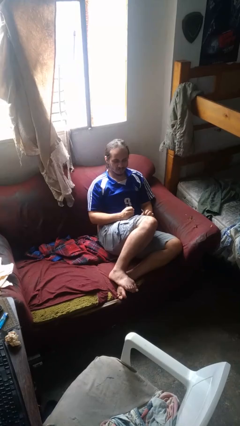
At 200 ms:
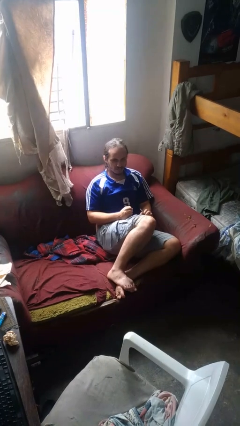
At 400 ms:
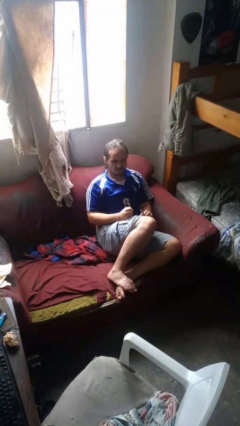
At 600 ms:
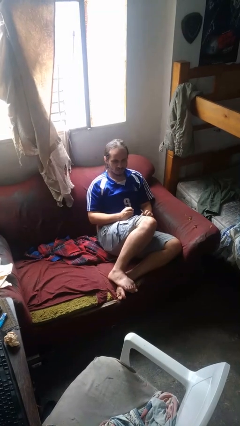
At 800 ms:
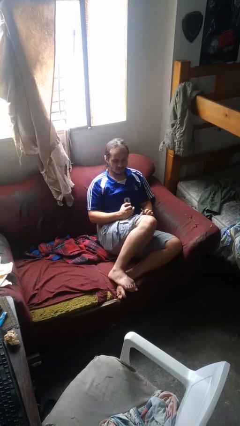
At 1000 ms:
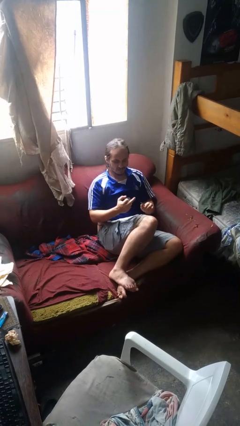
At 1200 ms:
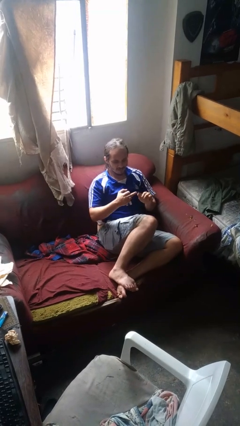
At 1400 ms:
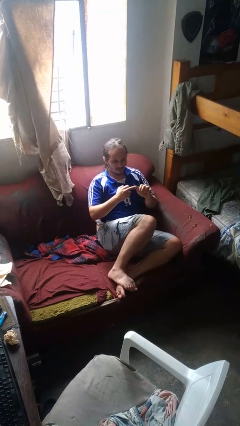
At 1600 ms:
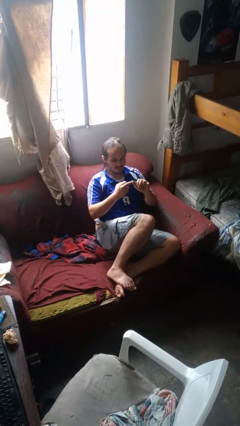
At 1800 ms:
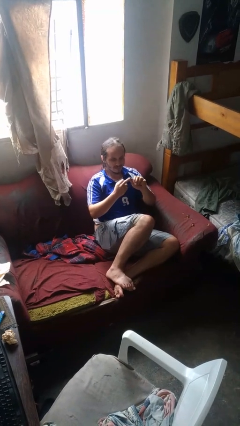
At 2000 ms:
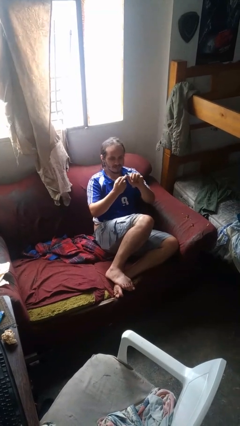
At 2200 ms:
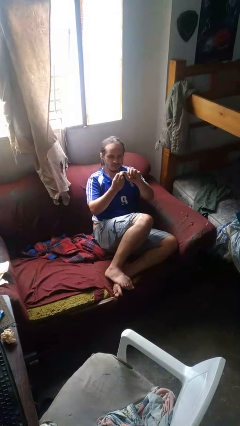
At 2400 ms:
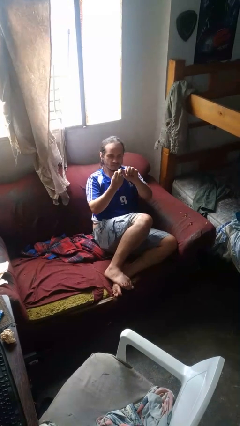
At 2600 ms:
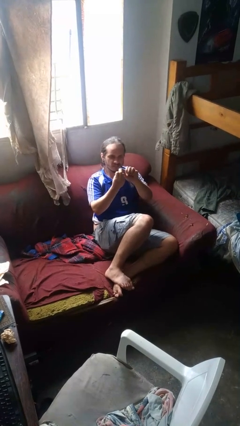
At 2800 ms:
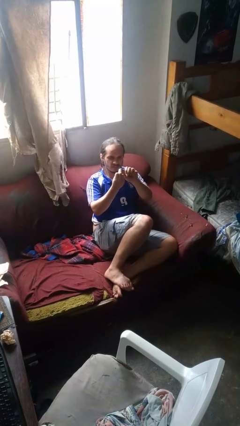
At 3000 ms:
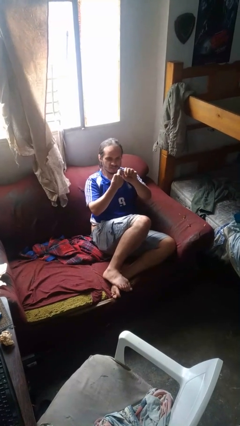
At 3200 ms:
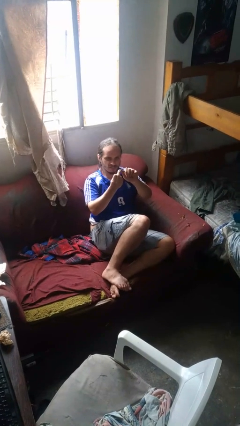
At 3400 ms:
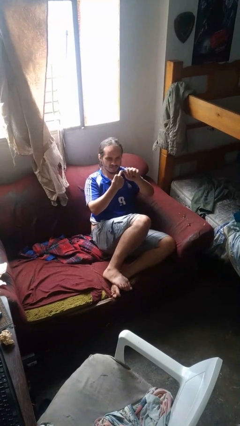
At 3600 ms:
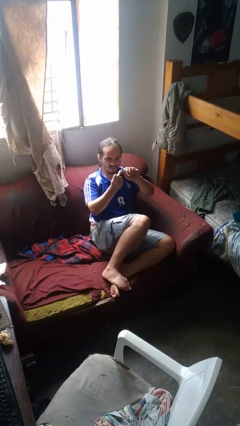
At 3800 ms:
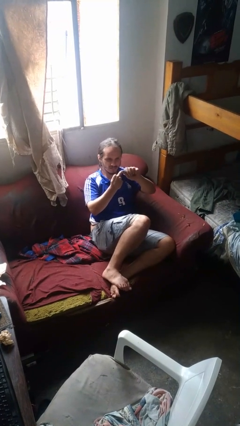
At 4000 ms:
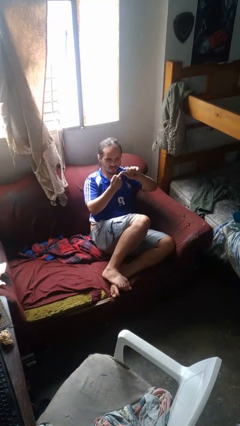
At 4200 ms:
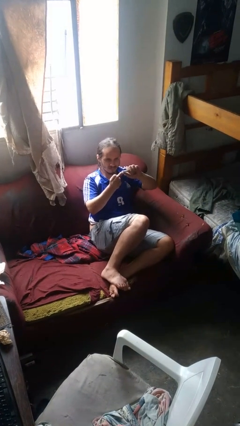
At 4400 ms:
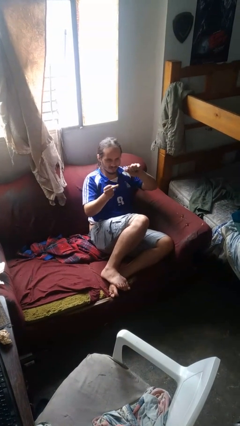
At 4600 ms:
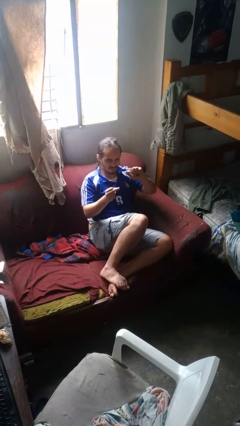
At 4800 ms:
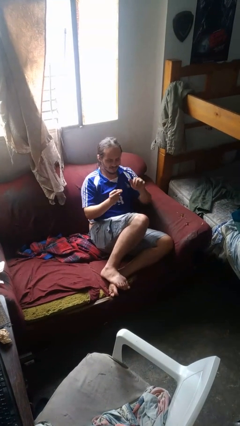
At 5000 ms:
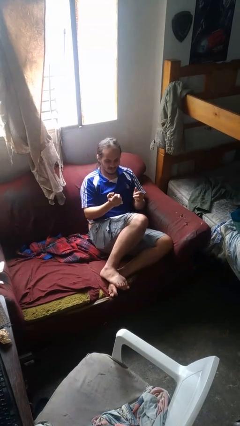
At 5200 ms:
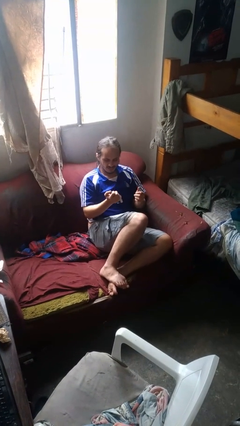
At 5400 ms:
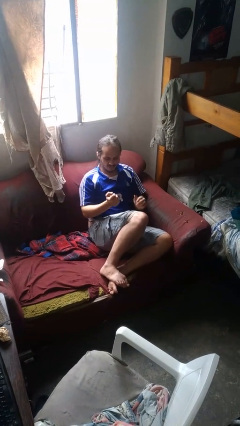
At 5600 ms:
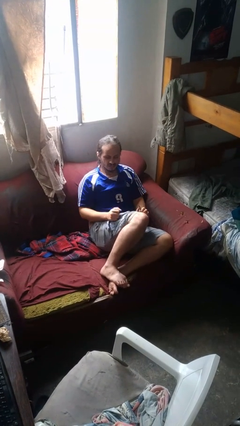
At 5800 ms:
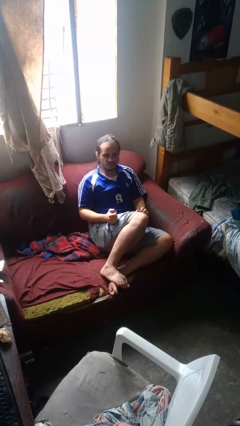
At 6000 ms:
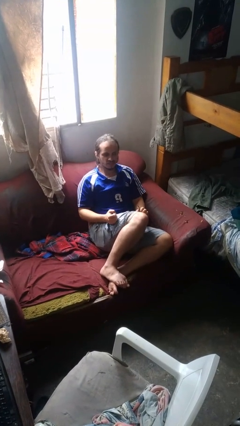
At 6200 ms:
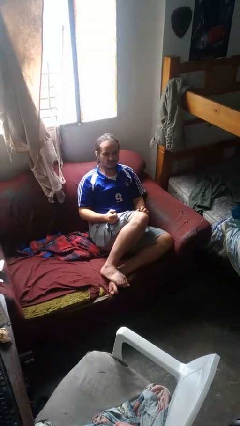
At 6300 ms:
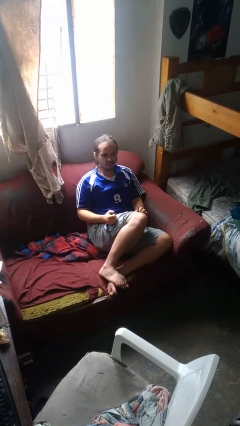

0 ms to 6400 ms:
person clips fingernails

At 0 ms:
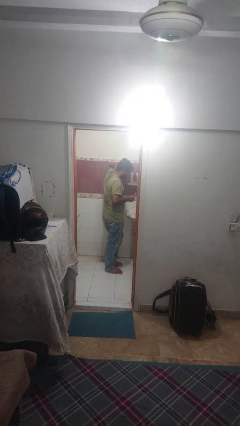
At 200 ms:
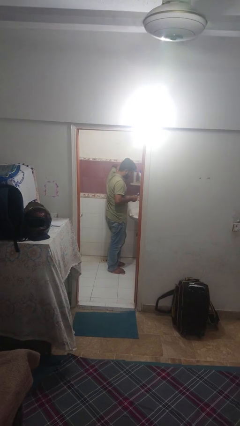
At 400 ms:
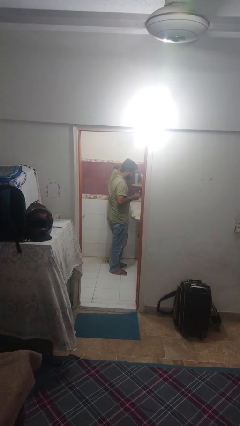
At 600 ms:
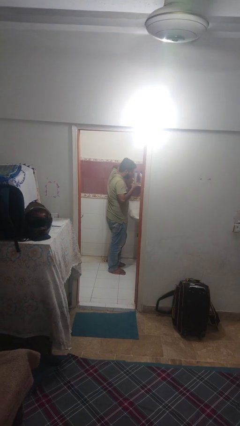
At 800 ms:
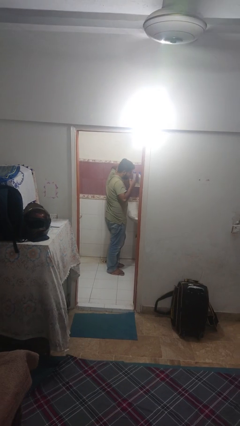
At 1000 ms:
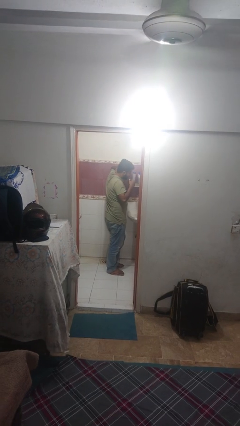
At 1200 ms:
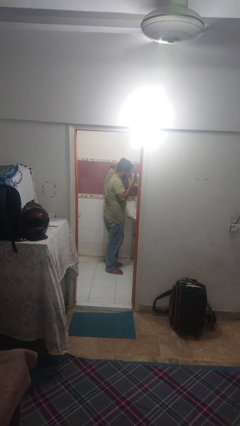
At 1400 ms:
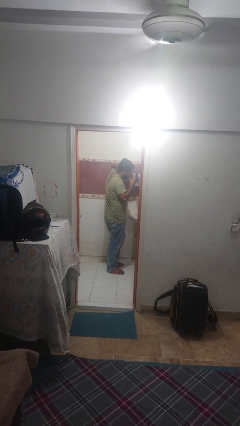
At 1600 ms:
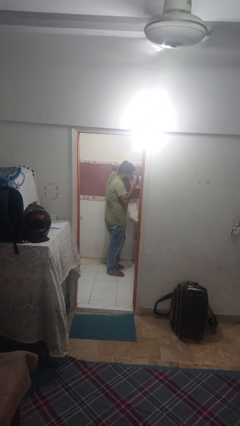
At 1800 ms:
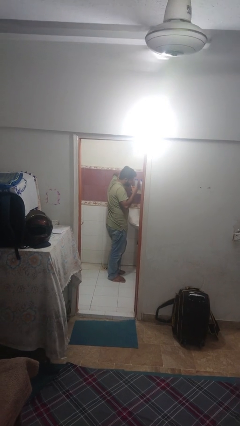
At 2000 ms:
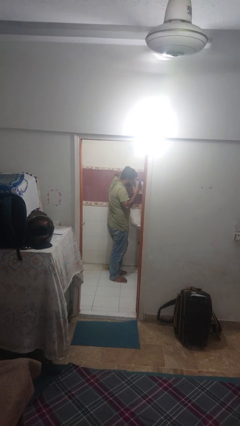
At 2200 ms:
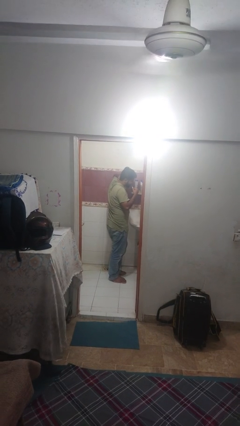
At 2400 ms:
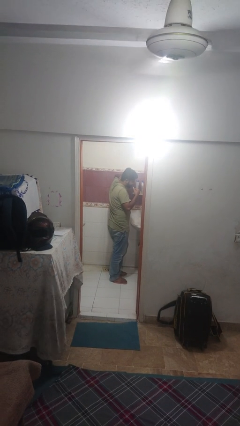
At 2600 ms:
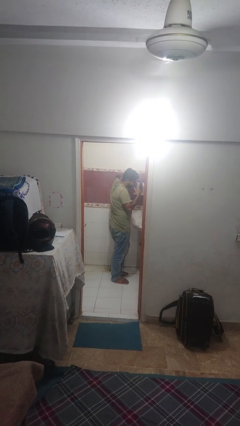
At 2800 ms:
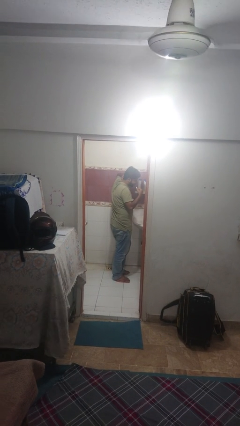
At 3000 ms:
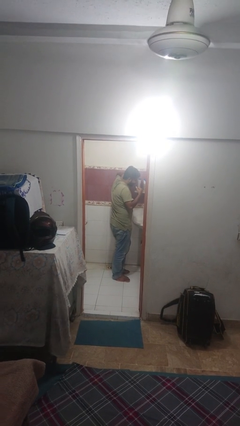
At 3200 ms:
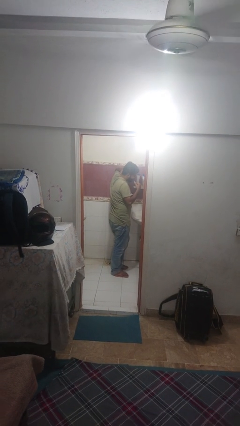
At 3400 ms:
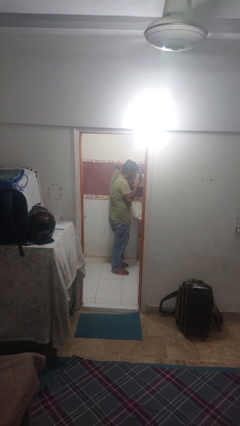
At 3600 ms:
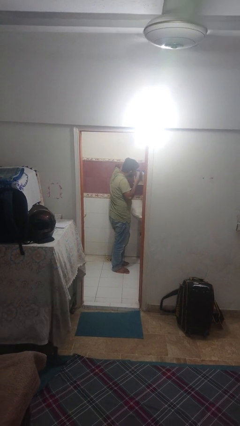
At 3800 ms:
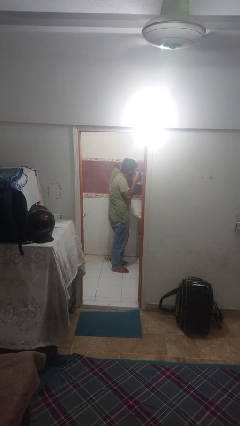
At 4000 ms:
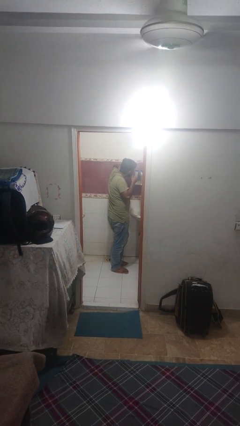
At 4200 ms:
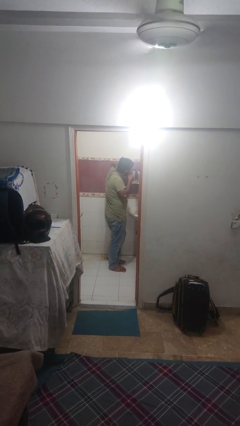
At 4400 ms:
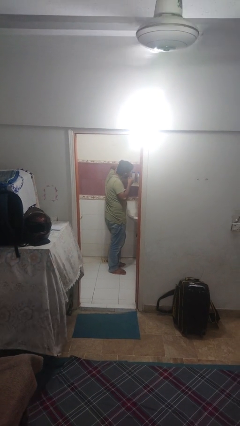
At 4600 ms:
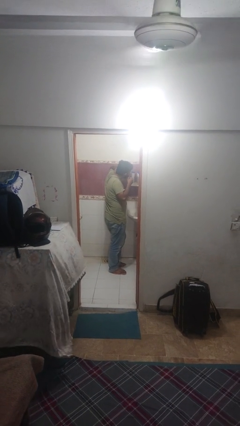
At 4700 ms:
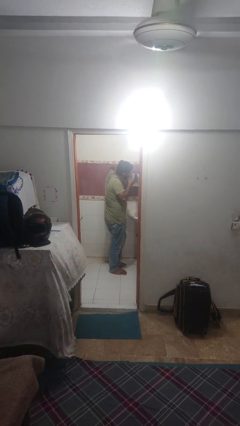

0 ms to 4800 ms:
person brushes teeth

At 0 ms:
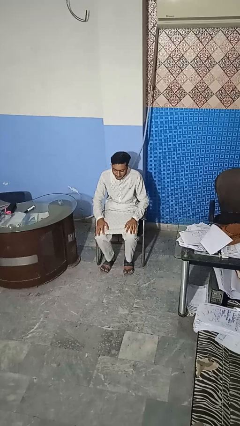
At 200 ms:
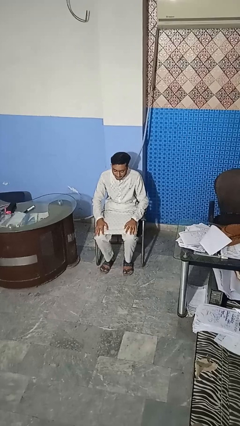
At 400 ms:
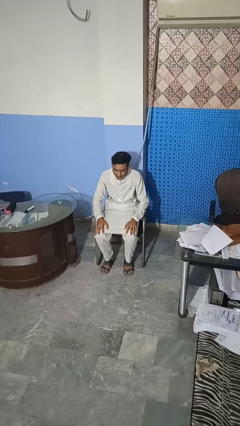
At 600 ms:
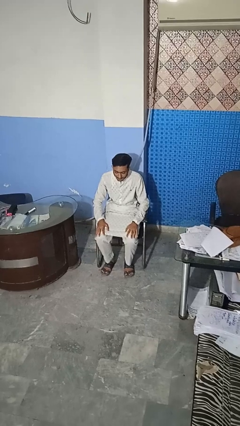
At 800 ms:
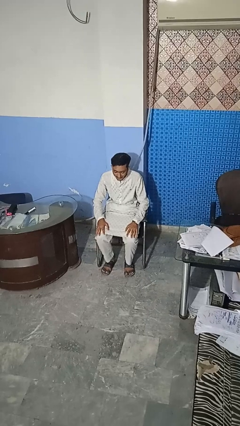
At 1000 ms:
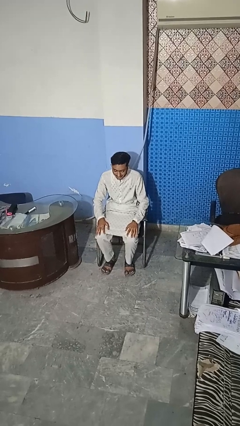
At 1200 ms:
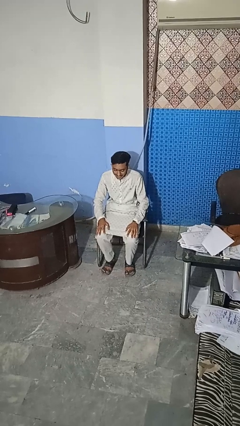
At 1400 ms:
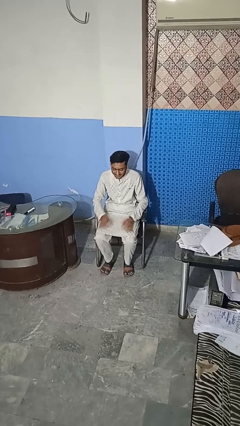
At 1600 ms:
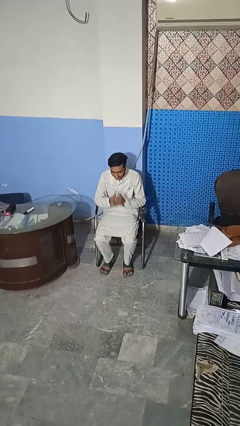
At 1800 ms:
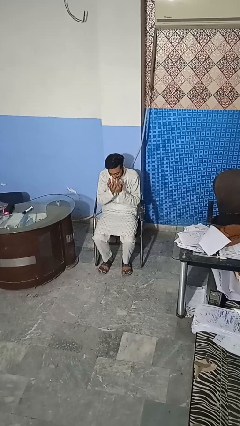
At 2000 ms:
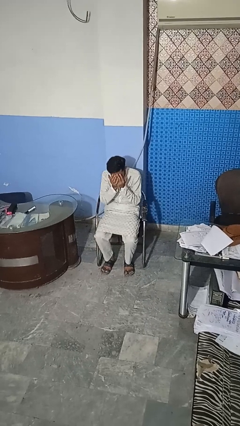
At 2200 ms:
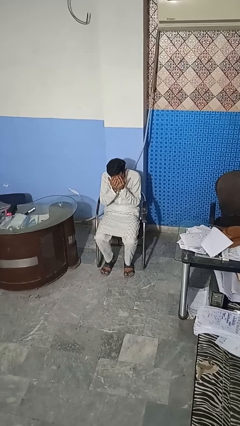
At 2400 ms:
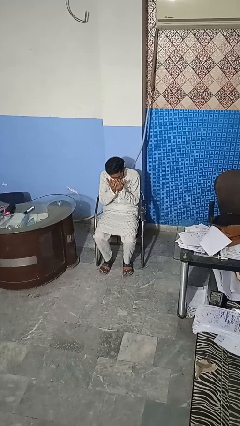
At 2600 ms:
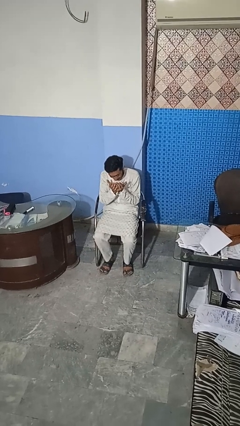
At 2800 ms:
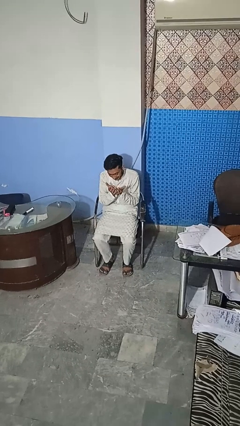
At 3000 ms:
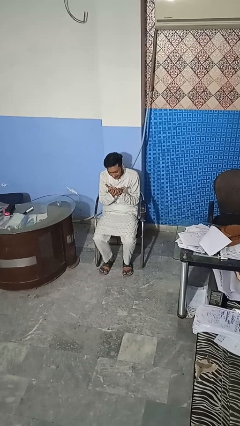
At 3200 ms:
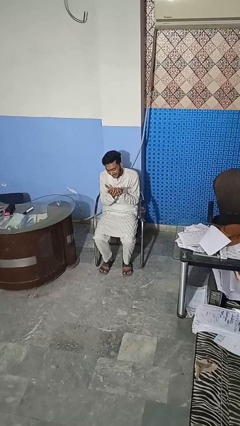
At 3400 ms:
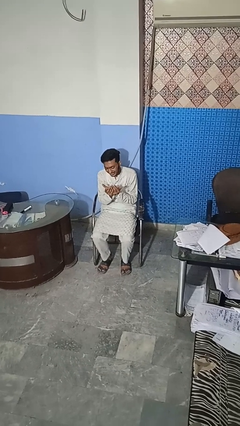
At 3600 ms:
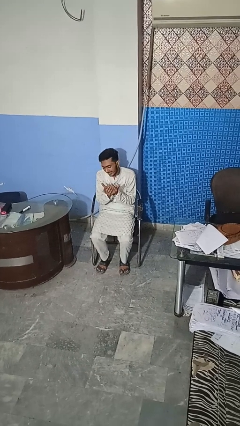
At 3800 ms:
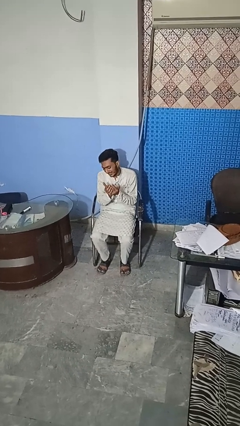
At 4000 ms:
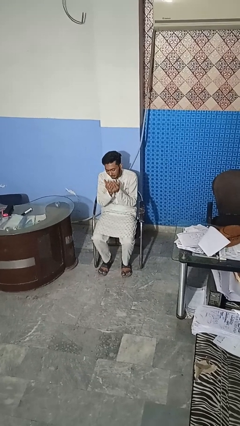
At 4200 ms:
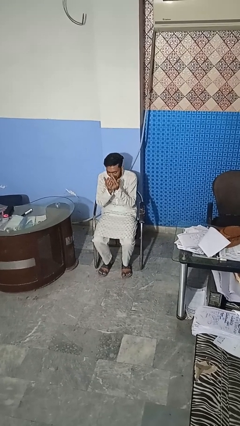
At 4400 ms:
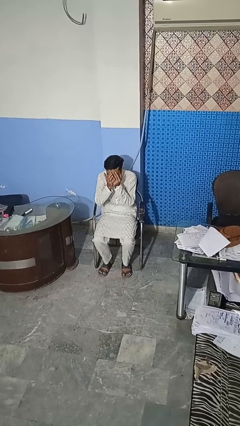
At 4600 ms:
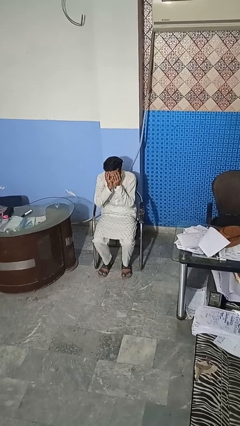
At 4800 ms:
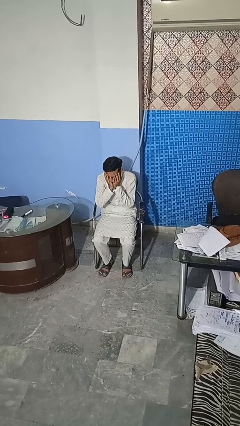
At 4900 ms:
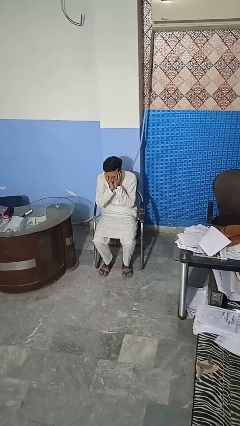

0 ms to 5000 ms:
person prays

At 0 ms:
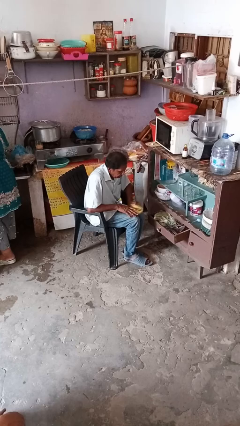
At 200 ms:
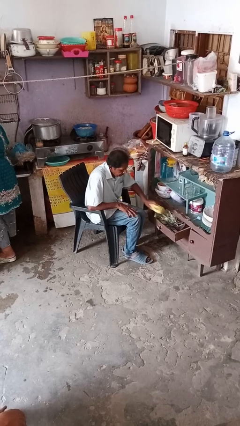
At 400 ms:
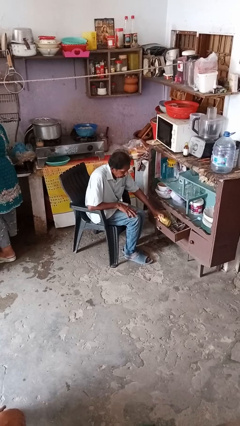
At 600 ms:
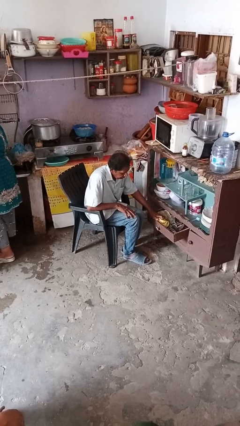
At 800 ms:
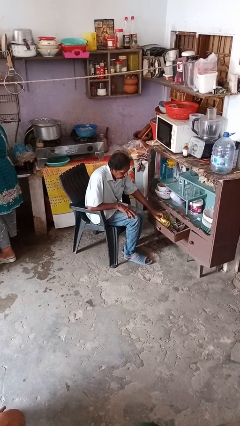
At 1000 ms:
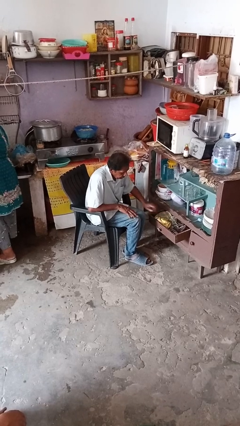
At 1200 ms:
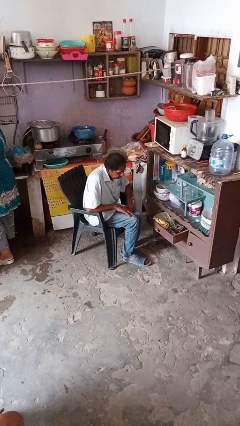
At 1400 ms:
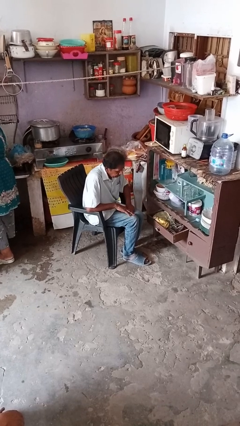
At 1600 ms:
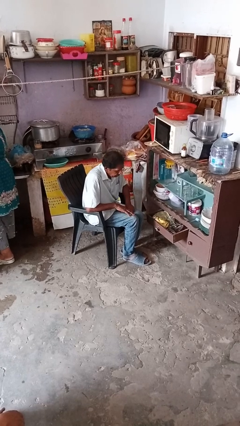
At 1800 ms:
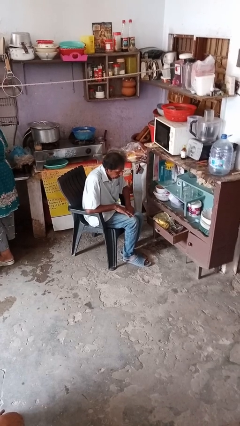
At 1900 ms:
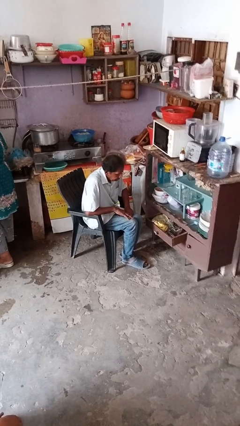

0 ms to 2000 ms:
person puts clothes into dresser
